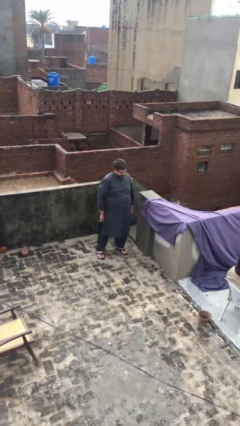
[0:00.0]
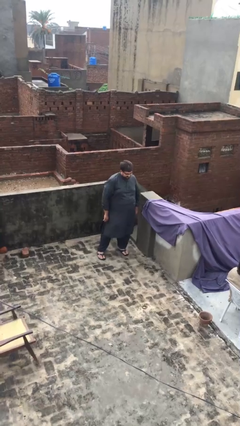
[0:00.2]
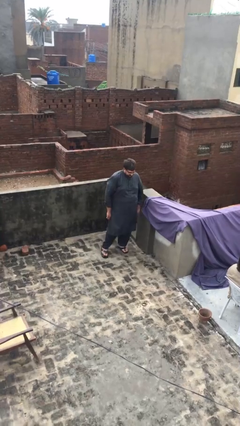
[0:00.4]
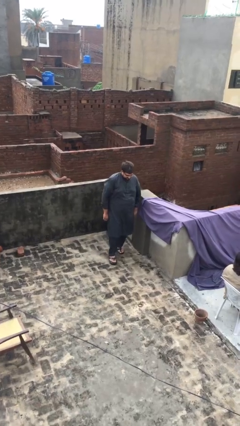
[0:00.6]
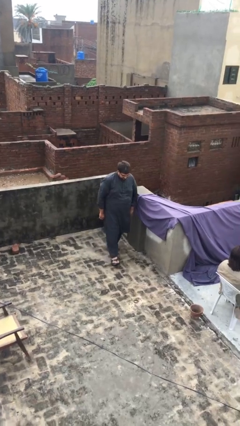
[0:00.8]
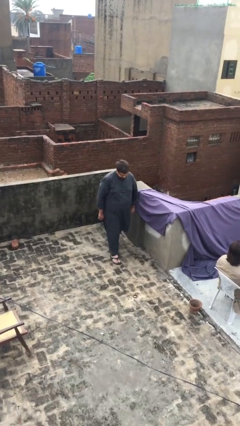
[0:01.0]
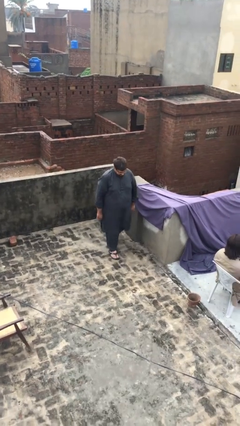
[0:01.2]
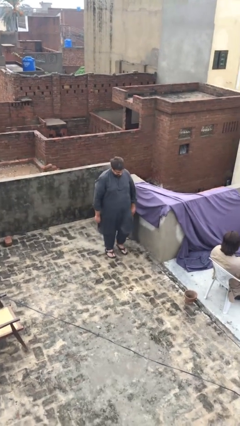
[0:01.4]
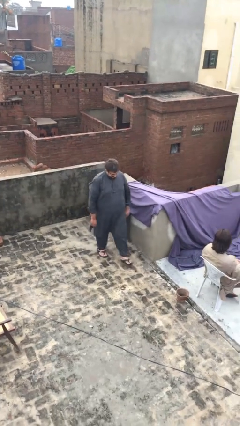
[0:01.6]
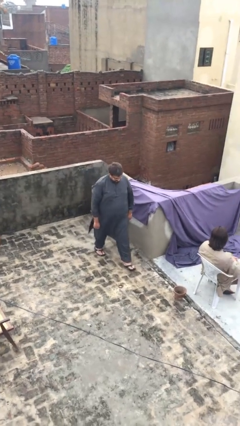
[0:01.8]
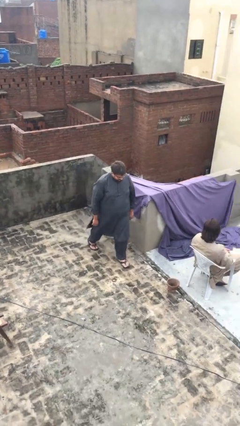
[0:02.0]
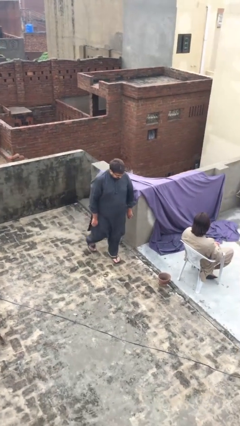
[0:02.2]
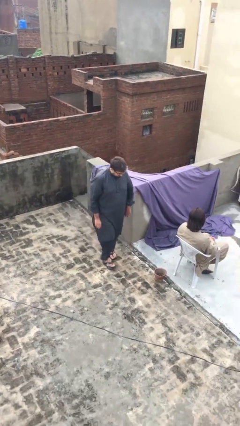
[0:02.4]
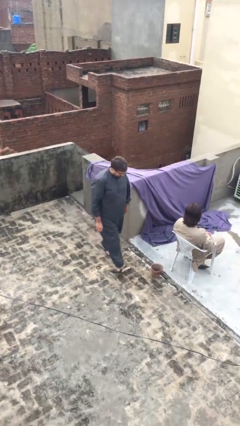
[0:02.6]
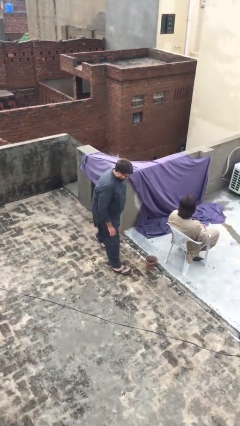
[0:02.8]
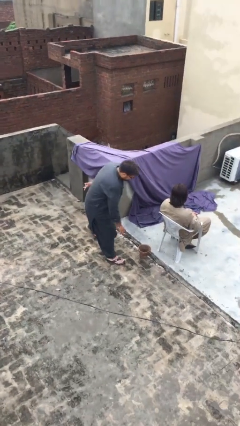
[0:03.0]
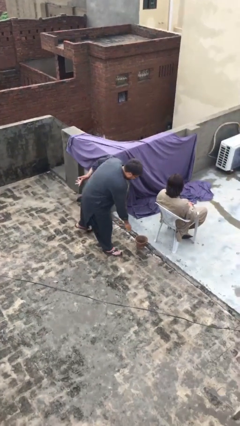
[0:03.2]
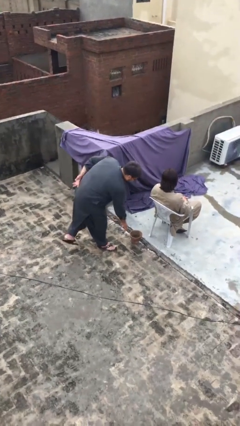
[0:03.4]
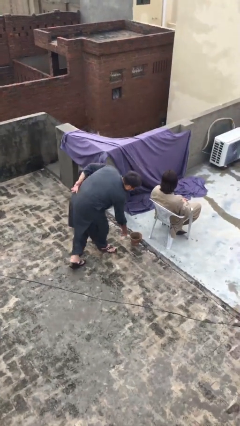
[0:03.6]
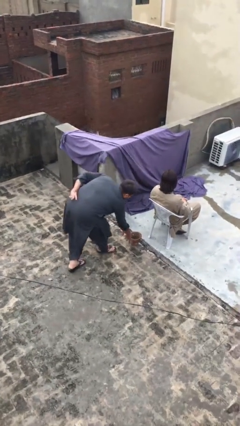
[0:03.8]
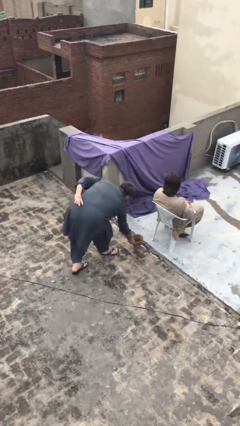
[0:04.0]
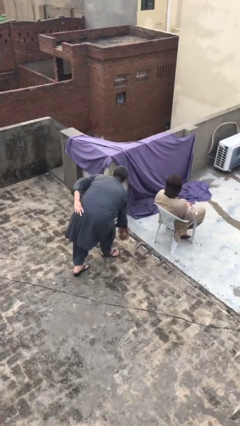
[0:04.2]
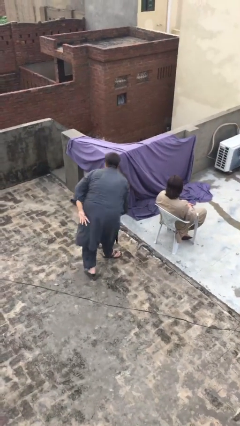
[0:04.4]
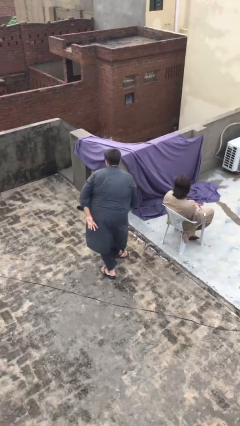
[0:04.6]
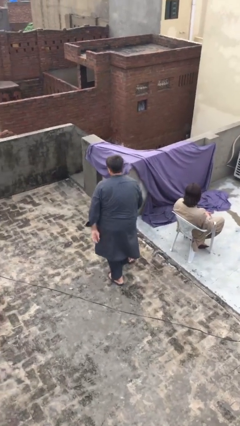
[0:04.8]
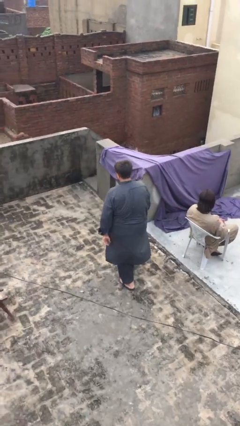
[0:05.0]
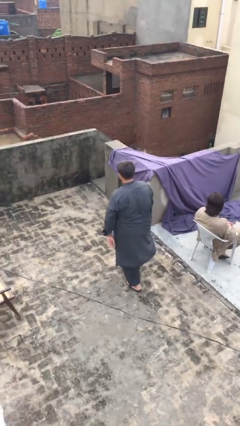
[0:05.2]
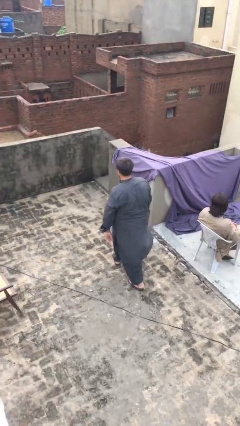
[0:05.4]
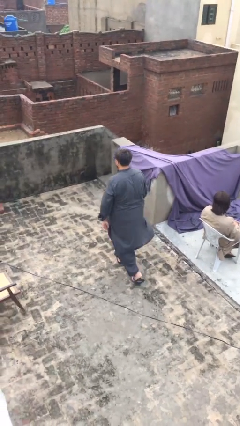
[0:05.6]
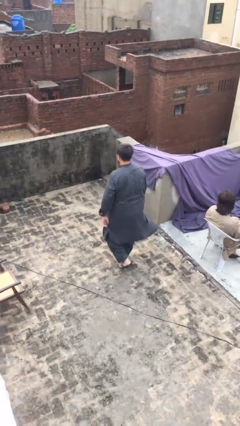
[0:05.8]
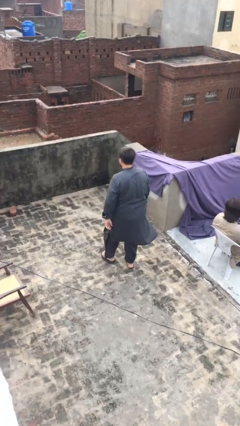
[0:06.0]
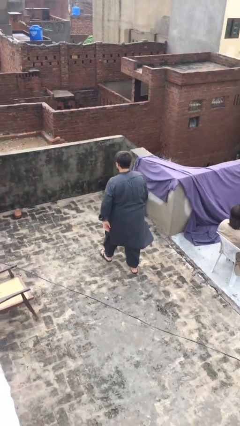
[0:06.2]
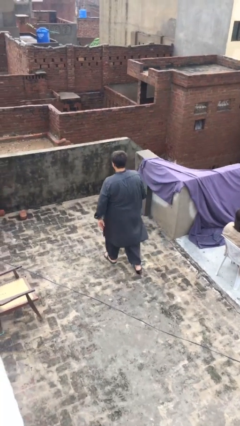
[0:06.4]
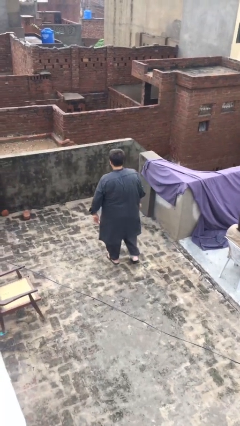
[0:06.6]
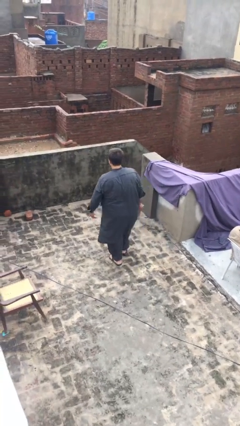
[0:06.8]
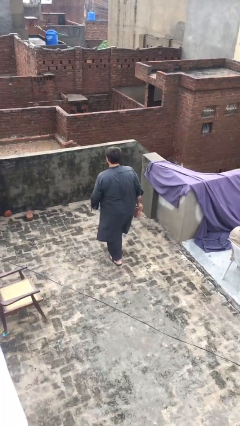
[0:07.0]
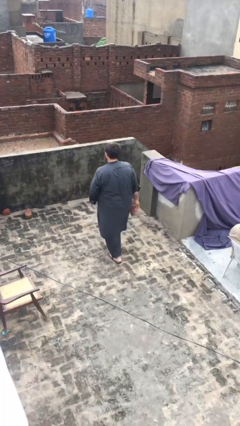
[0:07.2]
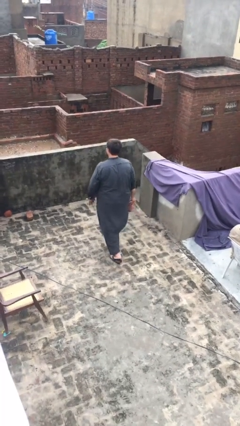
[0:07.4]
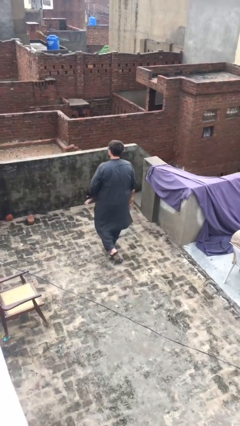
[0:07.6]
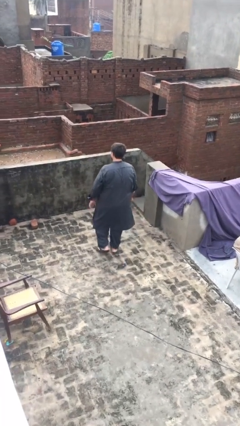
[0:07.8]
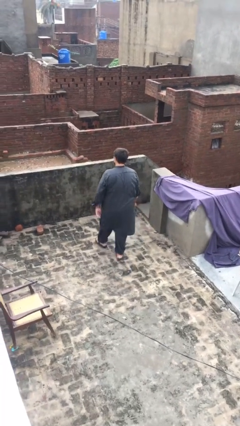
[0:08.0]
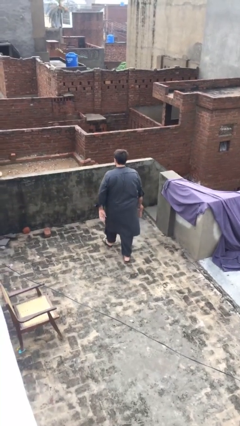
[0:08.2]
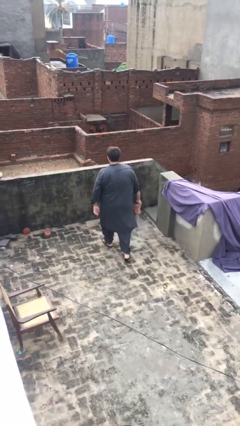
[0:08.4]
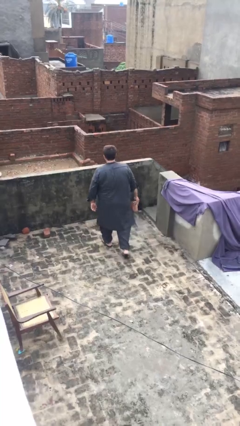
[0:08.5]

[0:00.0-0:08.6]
person steals object from person

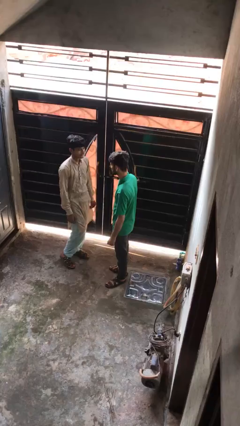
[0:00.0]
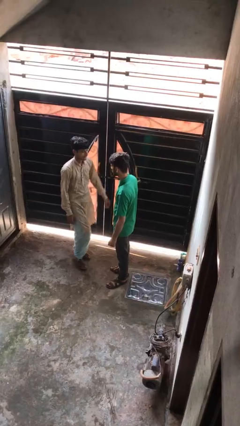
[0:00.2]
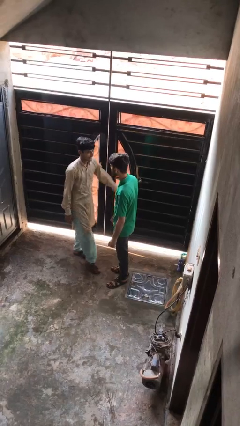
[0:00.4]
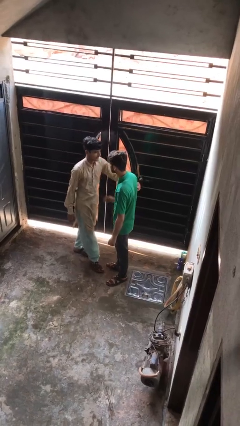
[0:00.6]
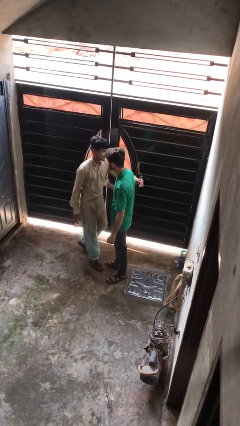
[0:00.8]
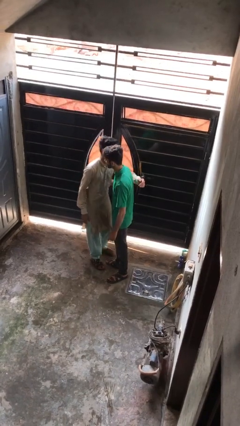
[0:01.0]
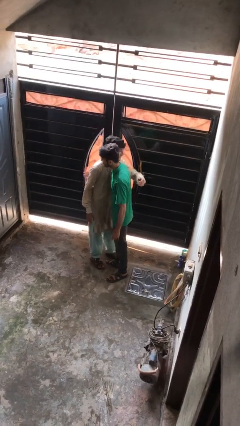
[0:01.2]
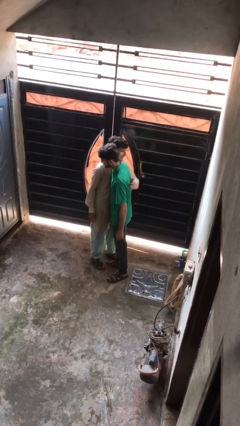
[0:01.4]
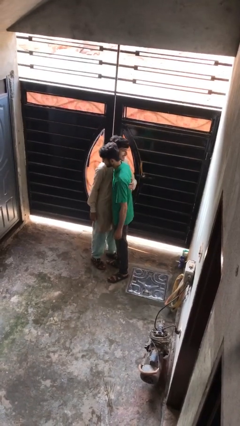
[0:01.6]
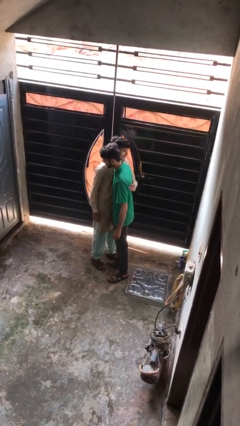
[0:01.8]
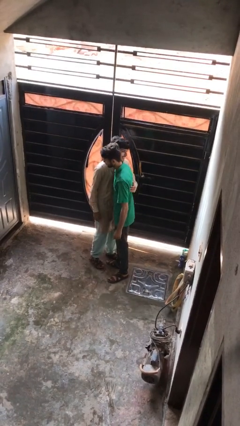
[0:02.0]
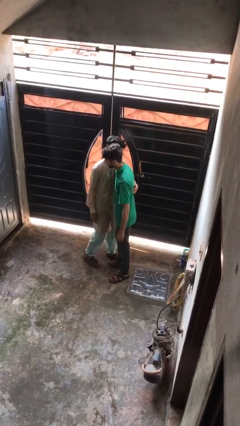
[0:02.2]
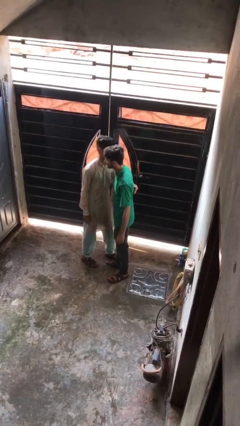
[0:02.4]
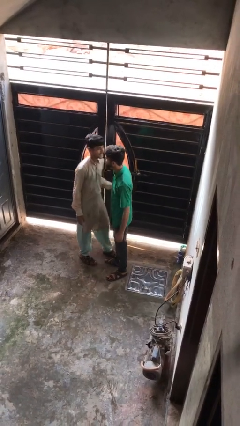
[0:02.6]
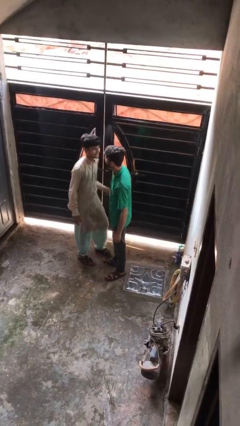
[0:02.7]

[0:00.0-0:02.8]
person embraces person

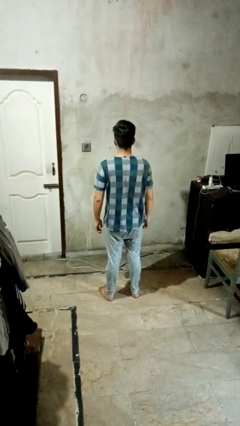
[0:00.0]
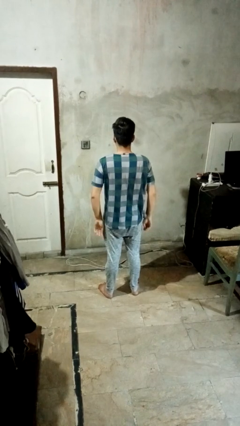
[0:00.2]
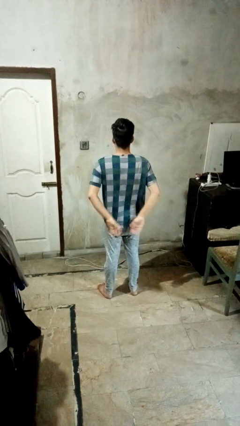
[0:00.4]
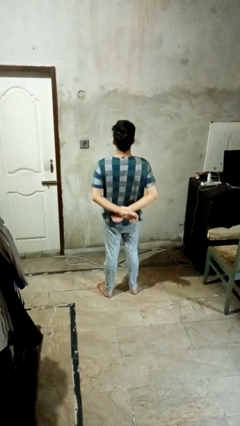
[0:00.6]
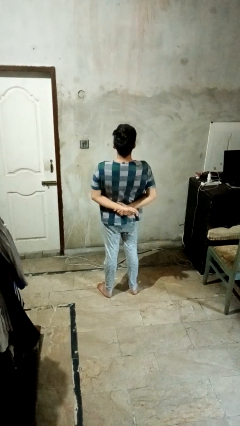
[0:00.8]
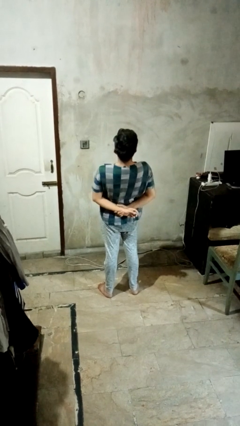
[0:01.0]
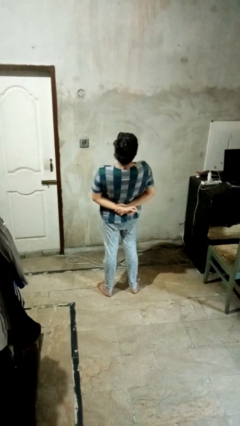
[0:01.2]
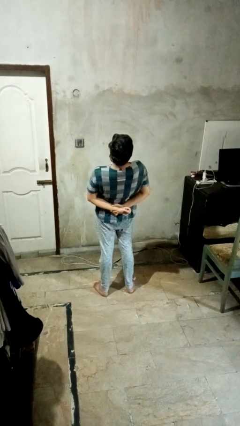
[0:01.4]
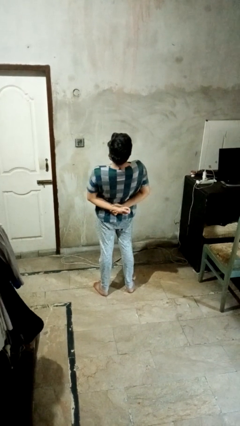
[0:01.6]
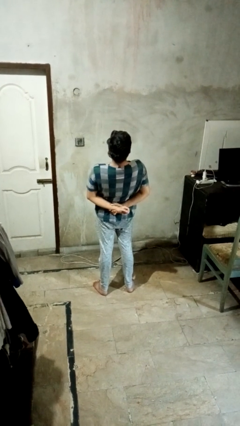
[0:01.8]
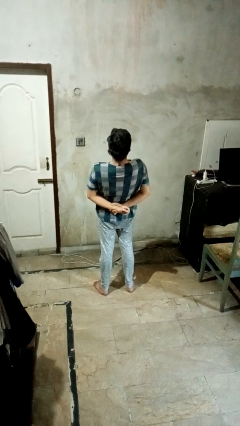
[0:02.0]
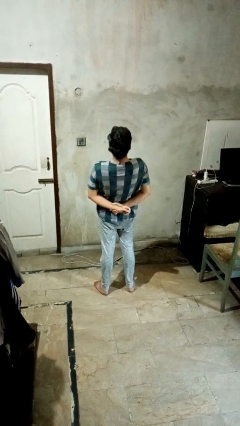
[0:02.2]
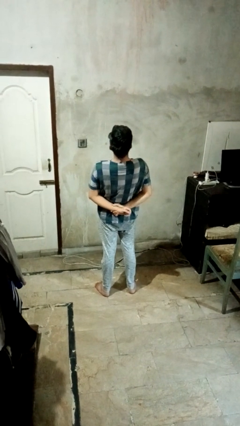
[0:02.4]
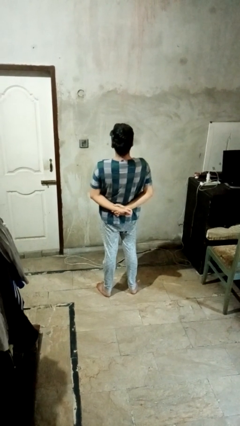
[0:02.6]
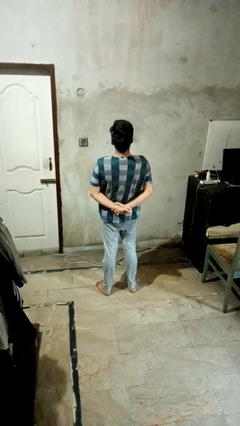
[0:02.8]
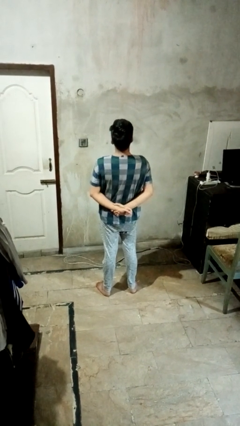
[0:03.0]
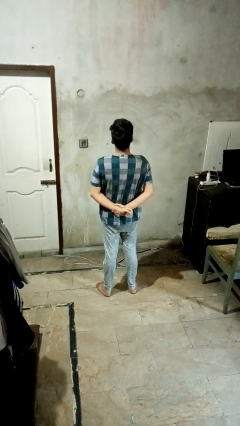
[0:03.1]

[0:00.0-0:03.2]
person stretches back

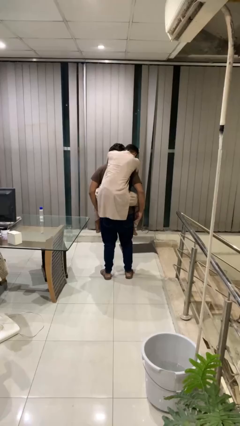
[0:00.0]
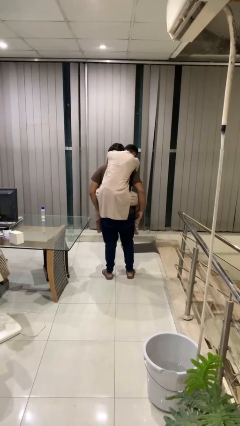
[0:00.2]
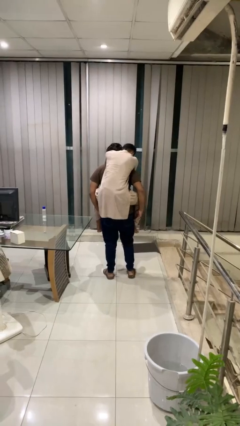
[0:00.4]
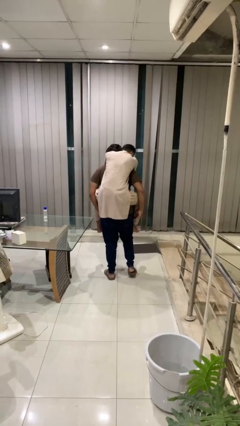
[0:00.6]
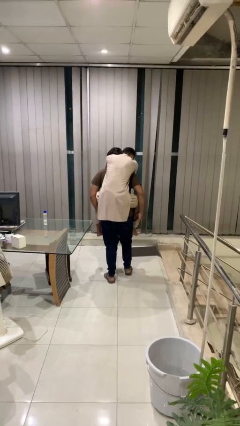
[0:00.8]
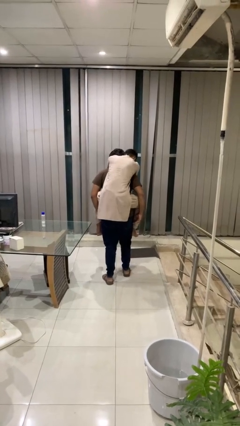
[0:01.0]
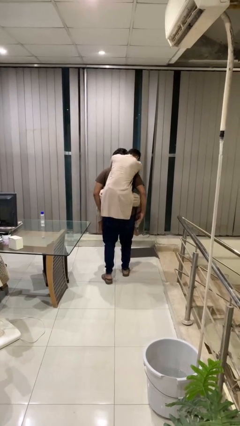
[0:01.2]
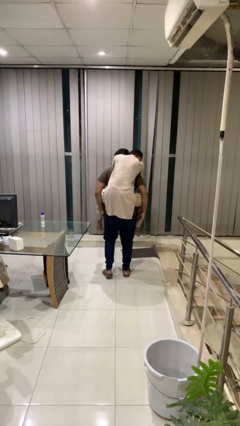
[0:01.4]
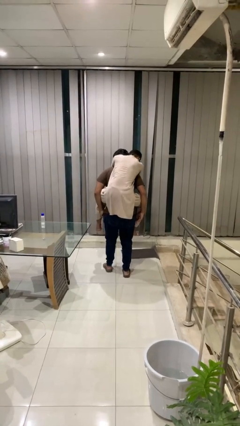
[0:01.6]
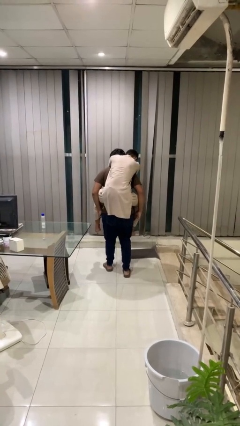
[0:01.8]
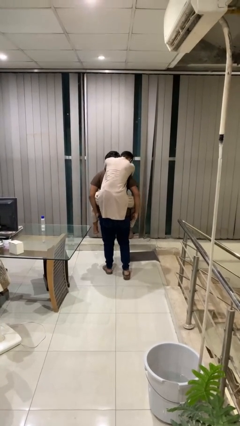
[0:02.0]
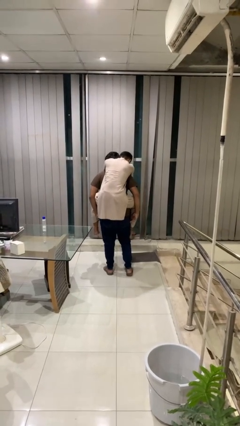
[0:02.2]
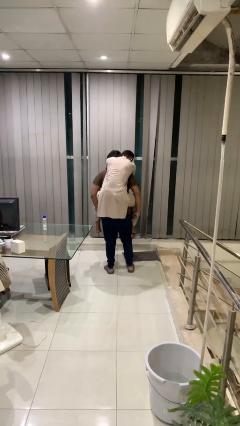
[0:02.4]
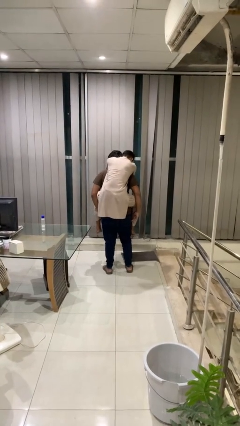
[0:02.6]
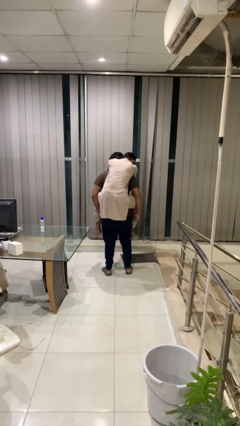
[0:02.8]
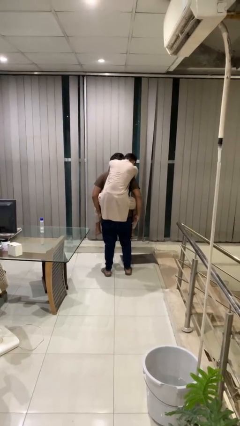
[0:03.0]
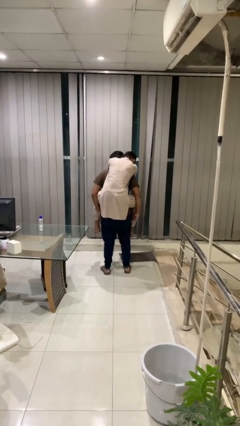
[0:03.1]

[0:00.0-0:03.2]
person carries person on back

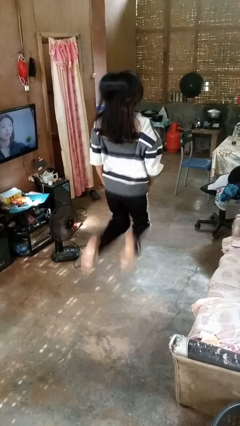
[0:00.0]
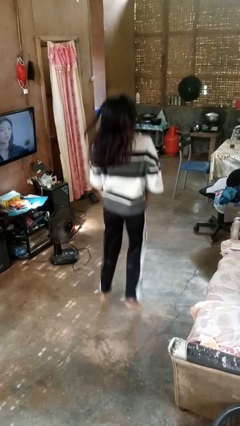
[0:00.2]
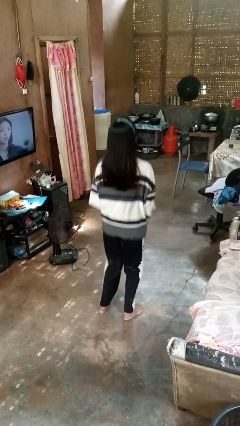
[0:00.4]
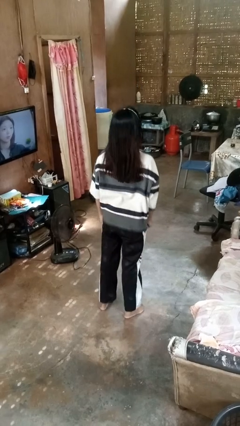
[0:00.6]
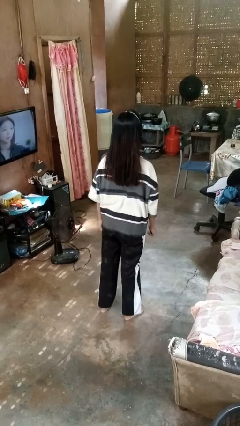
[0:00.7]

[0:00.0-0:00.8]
person jumps
